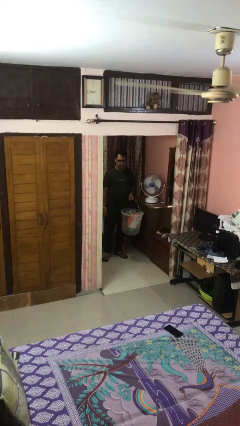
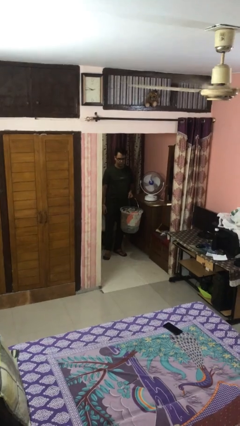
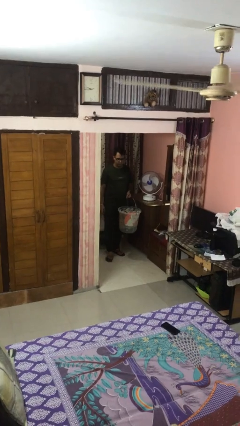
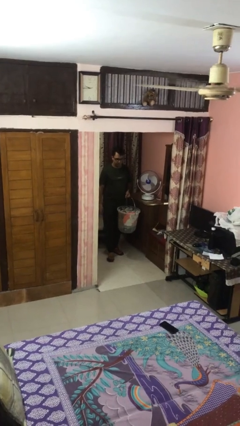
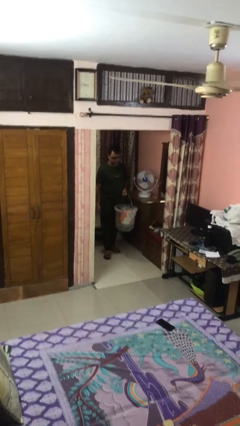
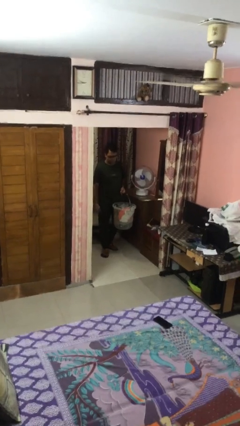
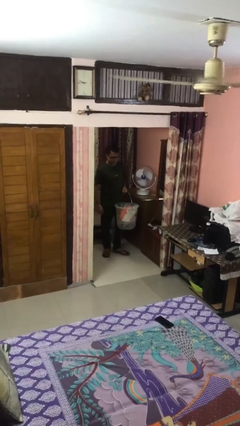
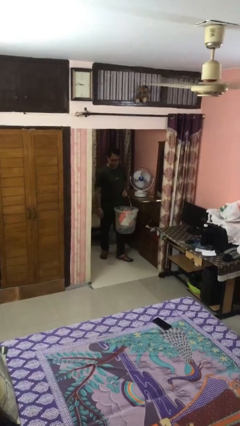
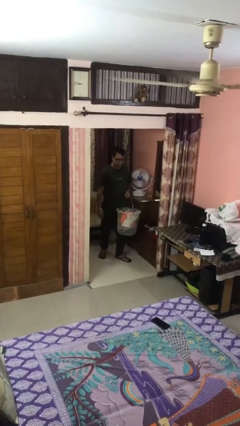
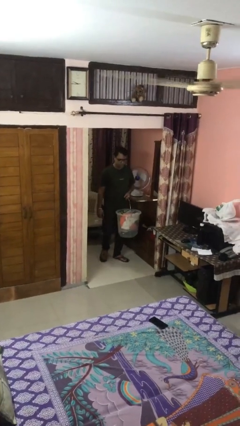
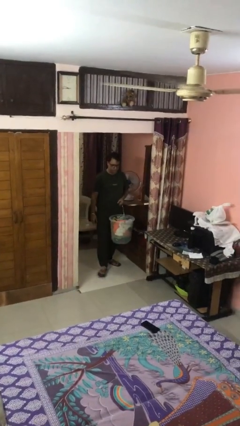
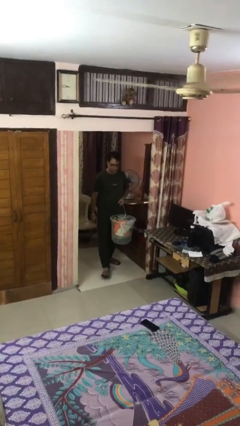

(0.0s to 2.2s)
person carries laundry basket

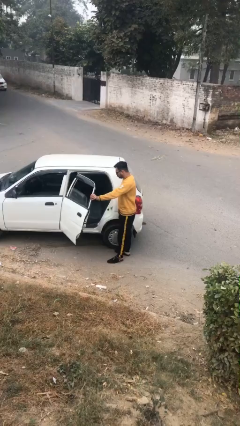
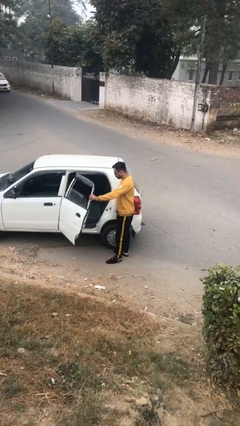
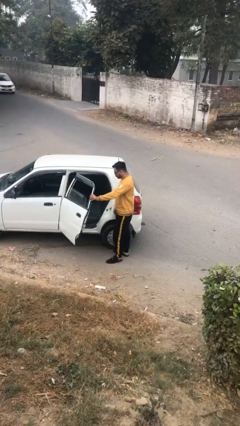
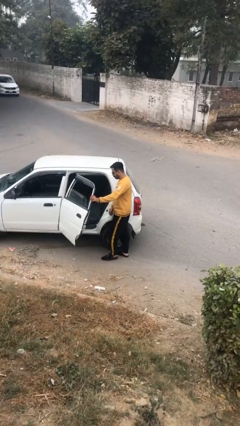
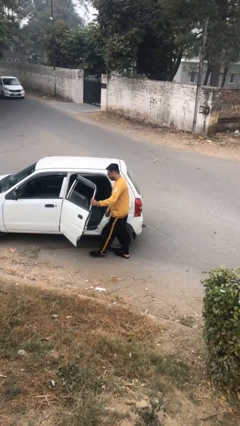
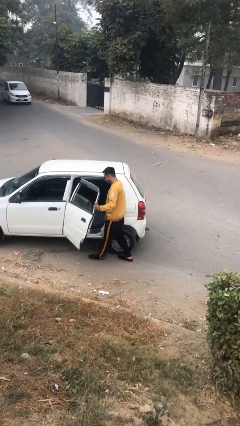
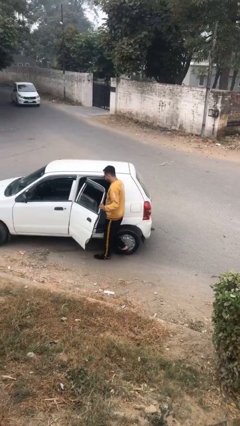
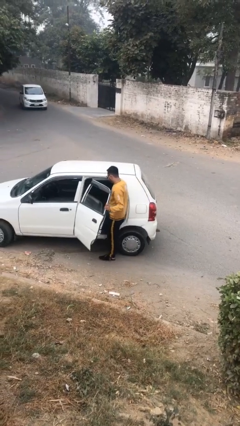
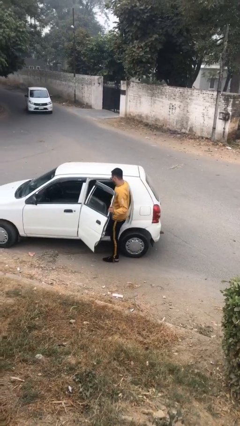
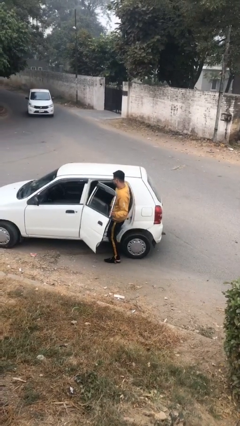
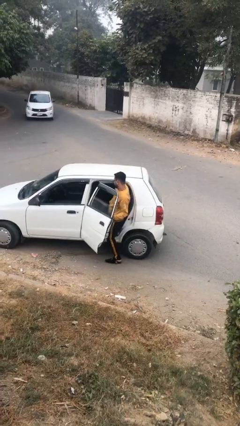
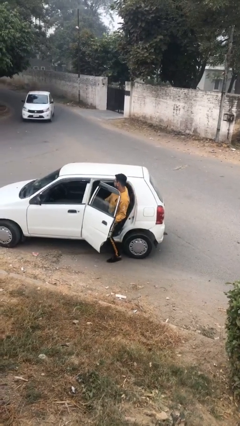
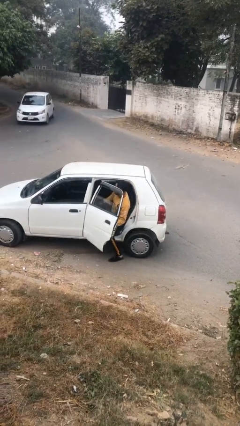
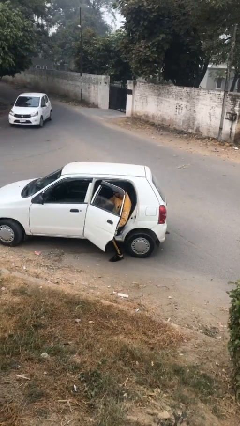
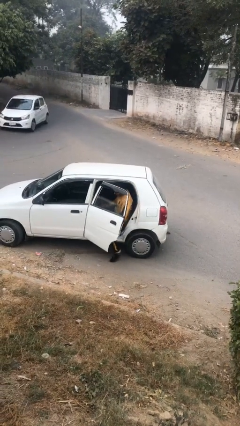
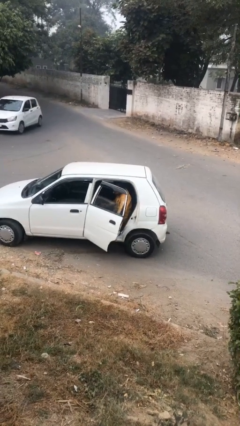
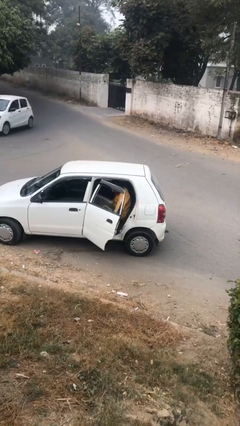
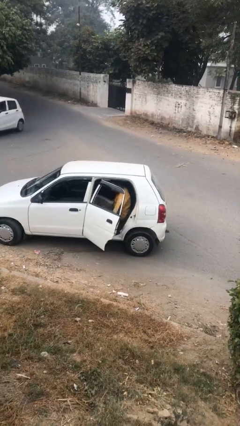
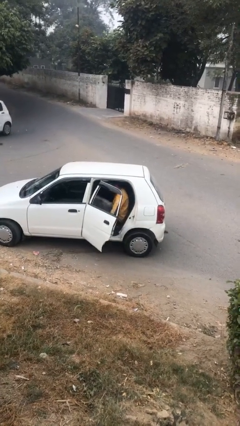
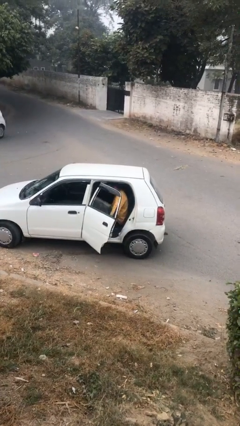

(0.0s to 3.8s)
person enters car

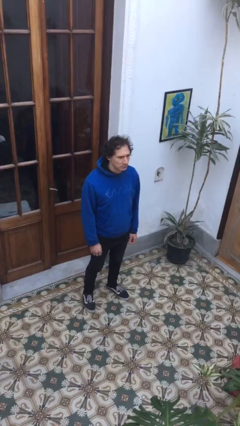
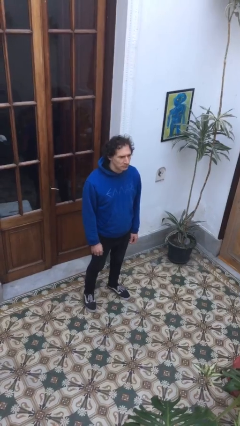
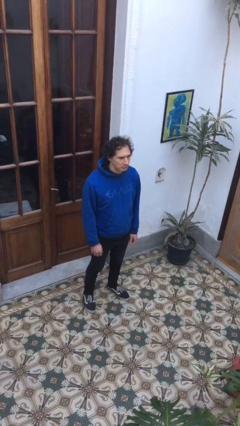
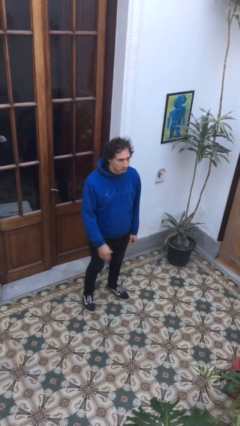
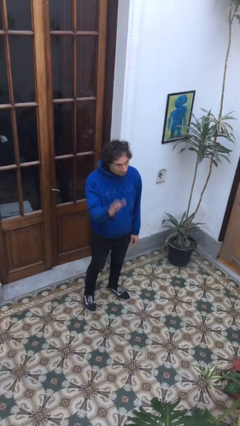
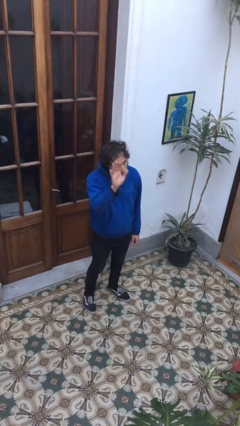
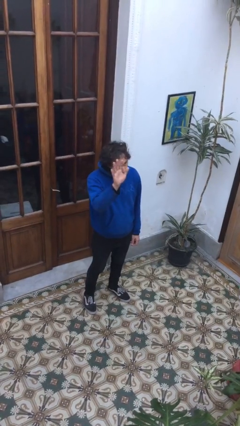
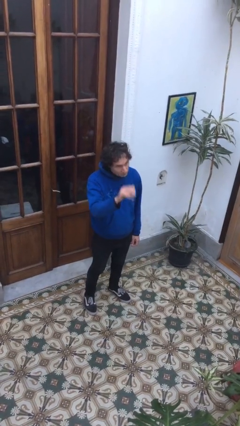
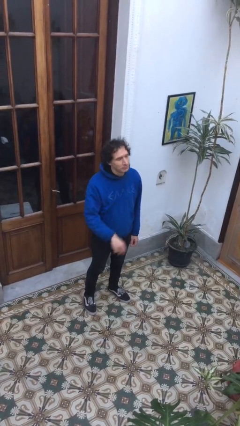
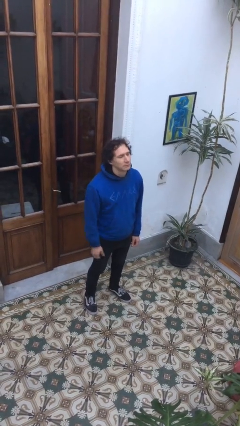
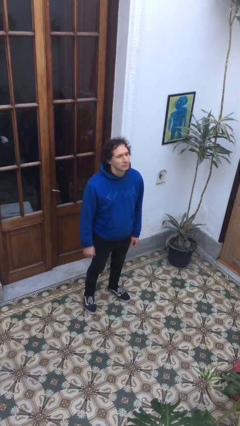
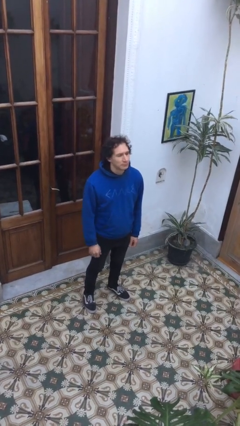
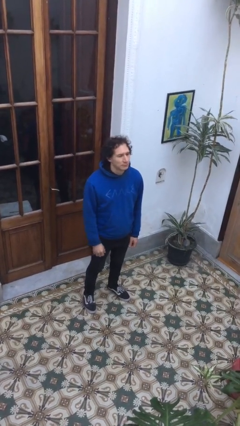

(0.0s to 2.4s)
person waves at person

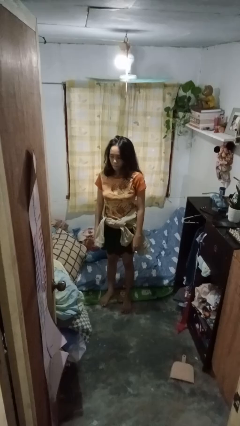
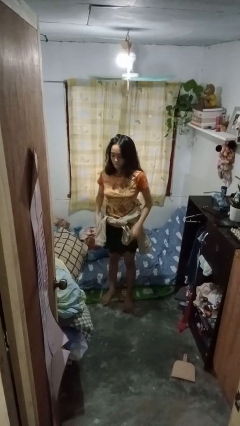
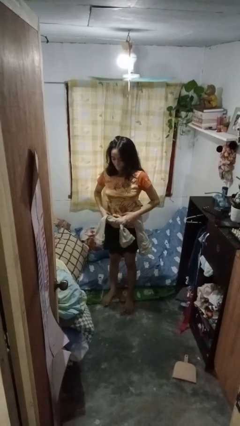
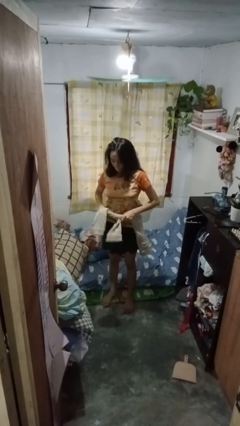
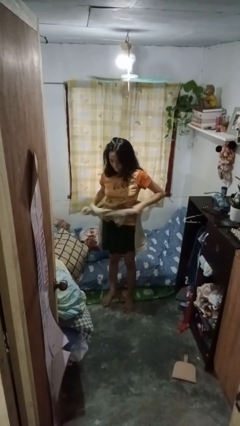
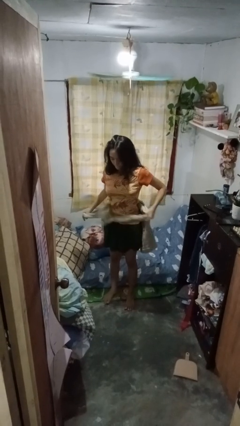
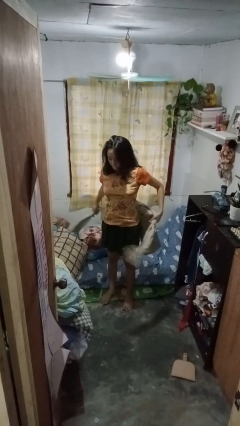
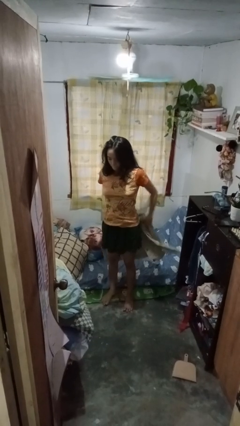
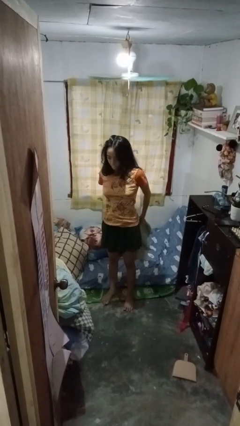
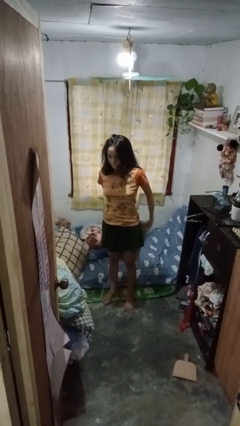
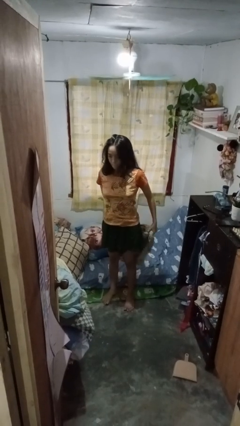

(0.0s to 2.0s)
person unties jacket around waist

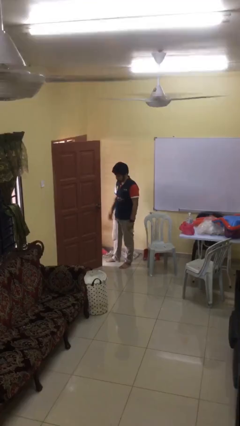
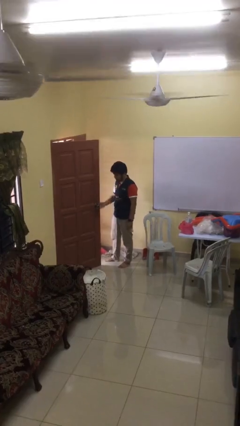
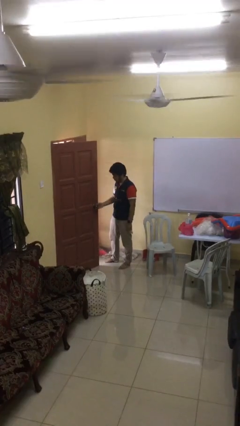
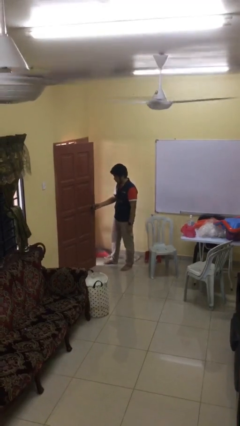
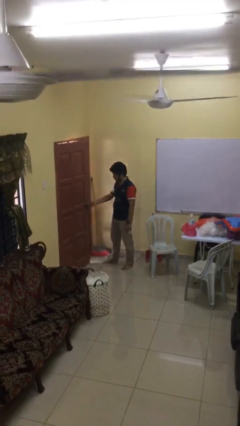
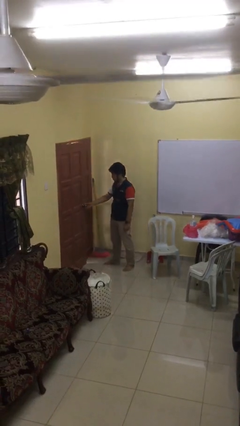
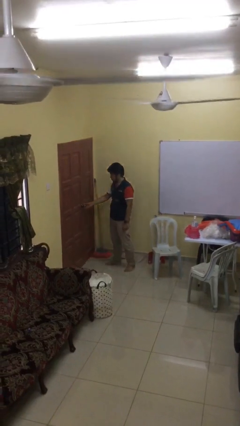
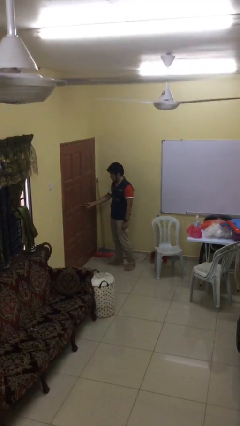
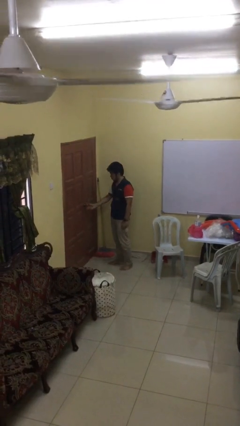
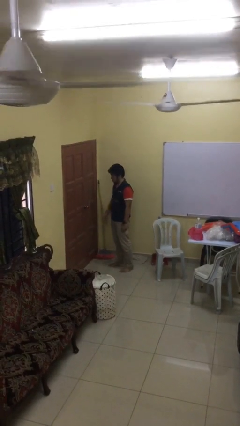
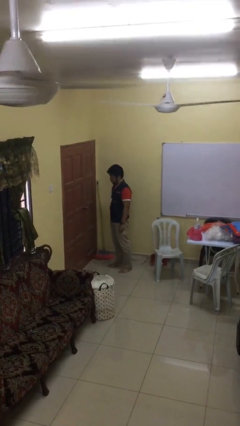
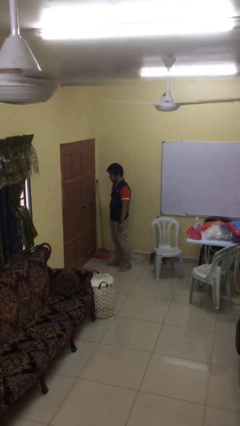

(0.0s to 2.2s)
person closes facility door

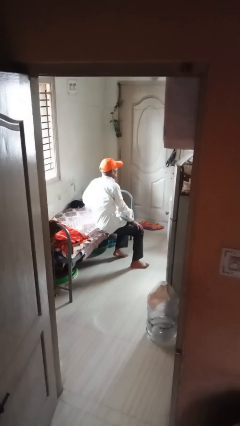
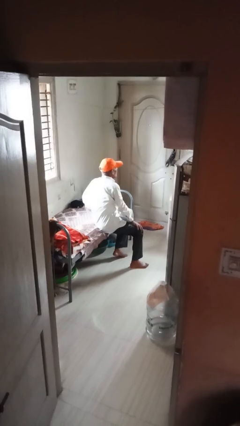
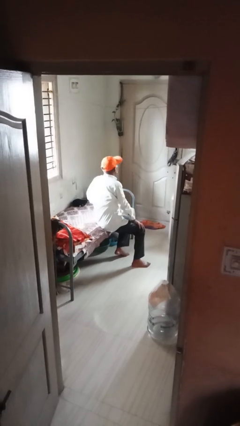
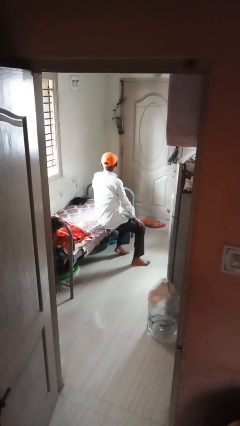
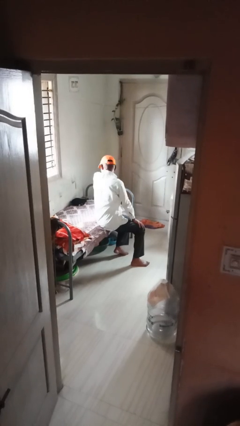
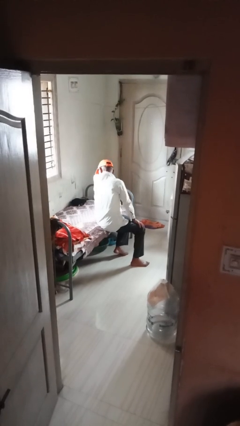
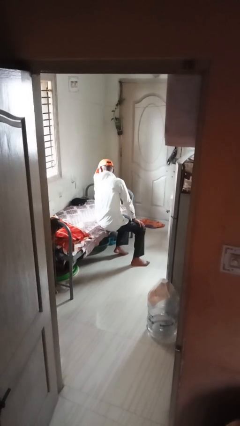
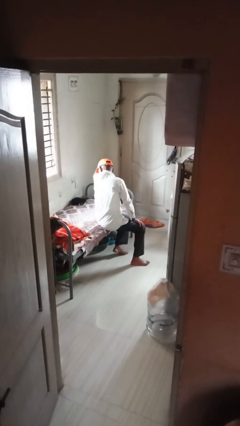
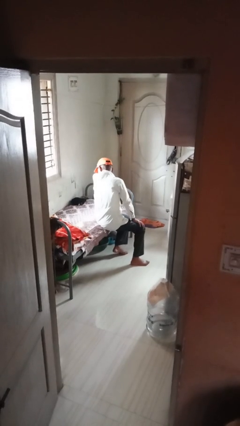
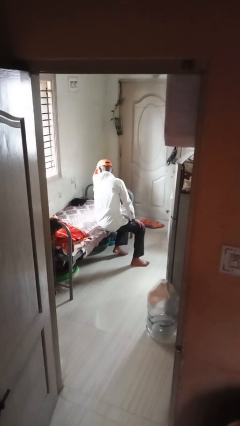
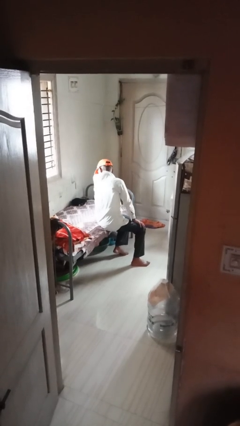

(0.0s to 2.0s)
person sneezes into arm

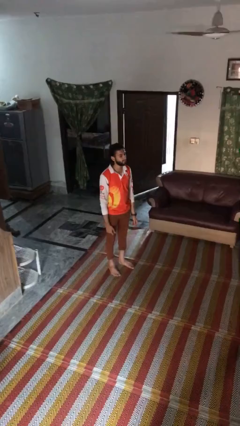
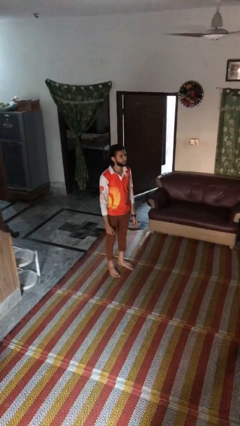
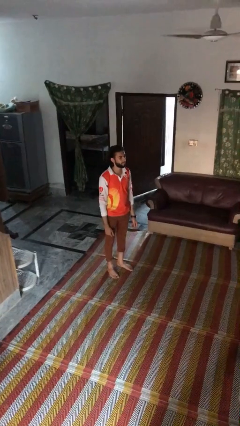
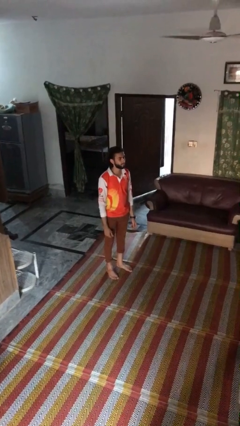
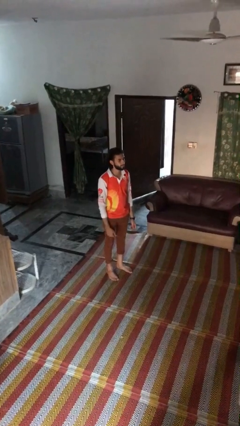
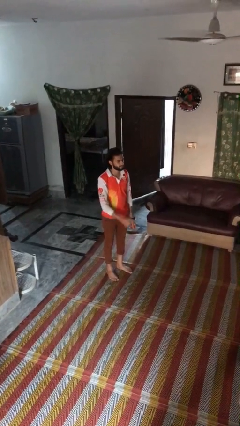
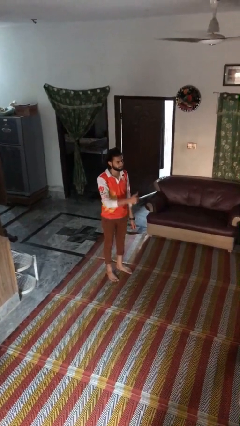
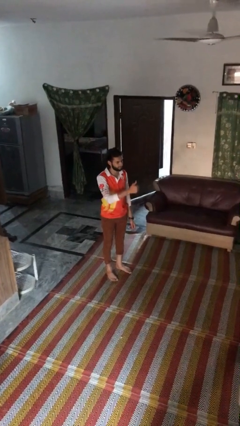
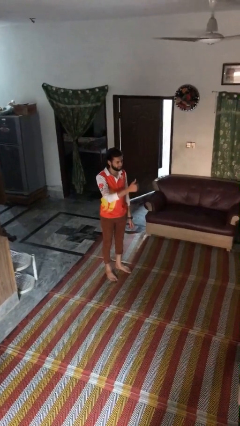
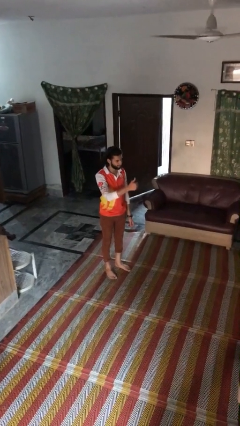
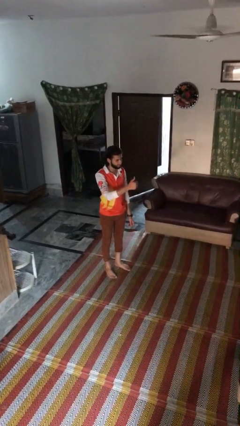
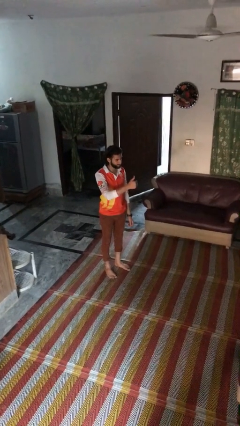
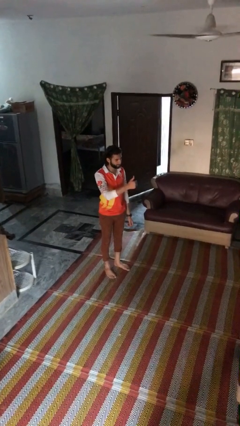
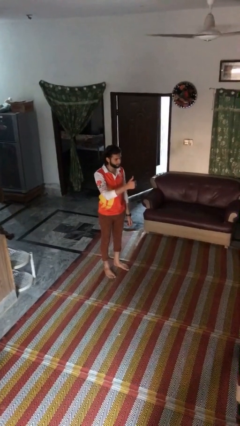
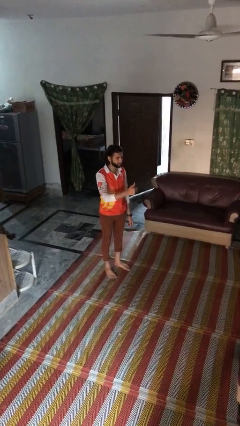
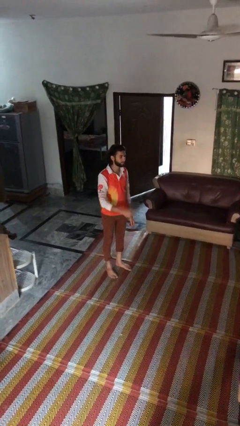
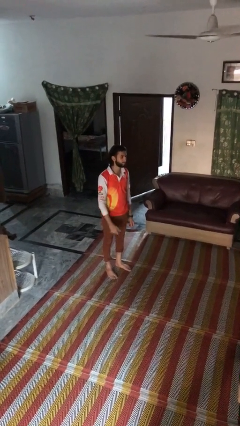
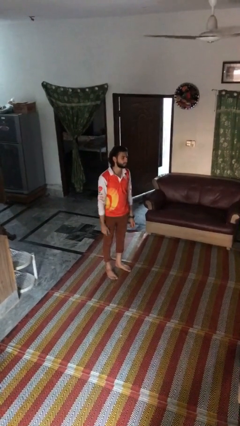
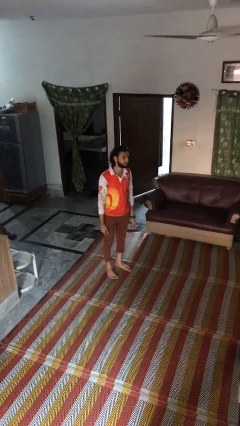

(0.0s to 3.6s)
person gestures thumbs up
